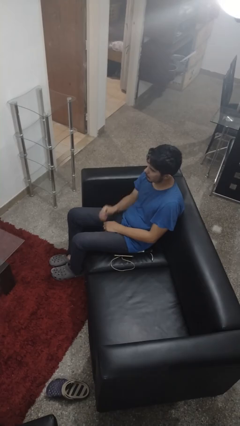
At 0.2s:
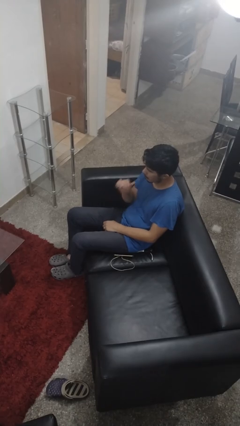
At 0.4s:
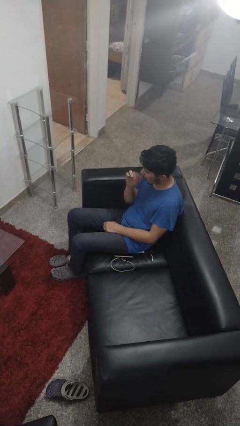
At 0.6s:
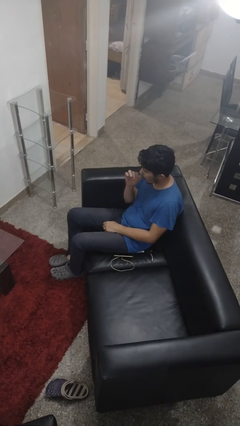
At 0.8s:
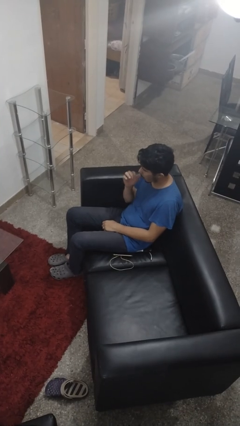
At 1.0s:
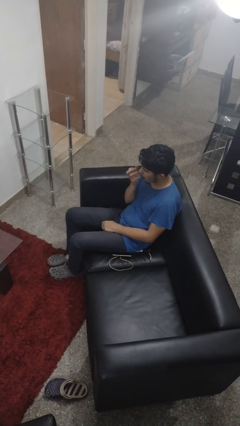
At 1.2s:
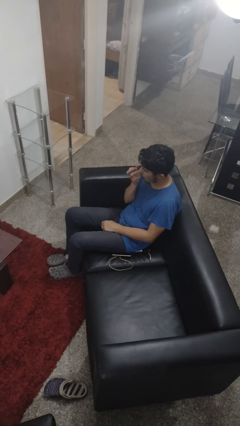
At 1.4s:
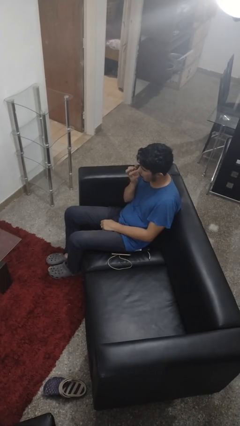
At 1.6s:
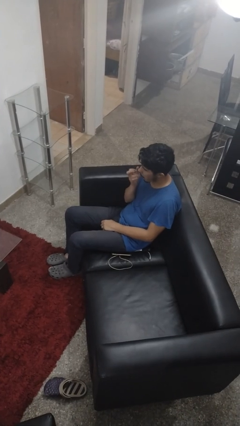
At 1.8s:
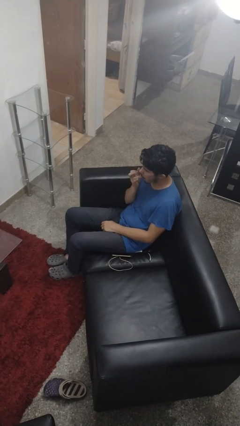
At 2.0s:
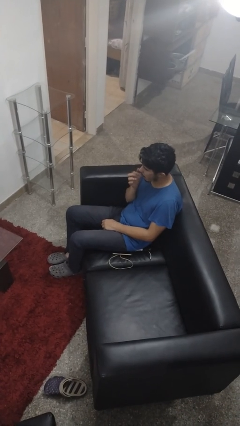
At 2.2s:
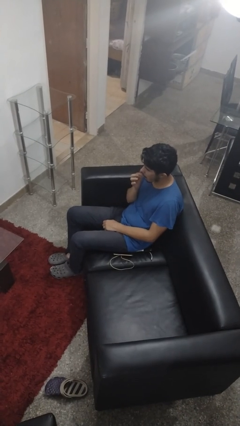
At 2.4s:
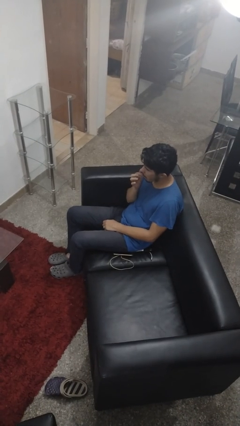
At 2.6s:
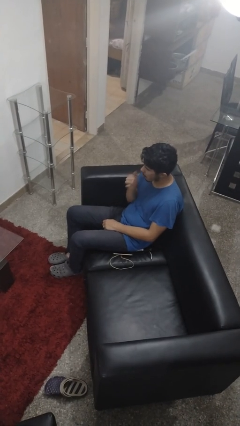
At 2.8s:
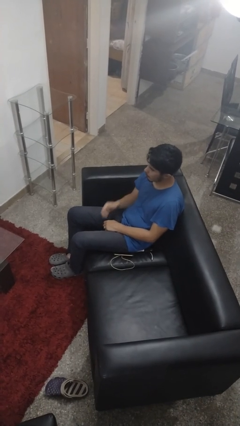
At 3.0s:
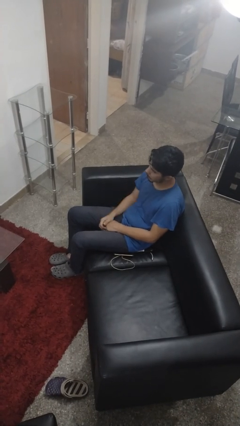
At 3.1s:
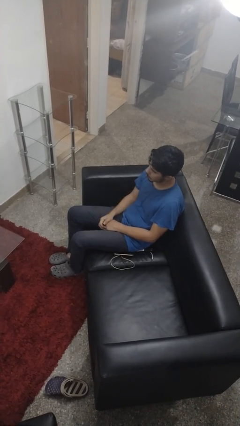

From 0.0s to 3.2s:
person licks fingers

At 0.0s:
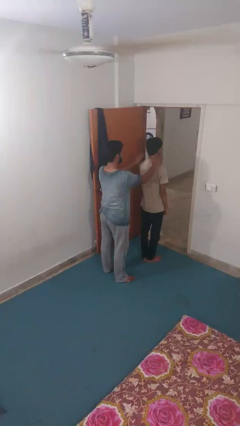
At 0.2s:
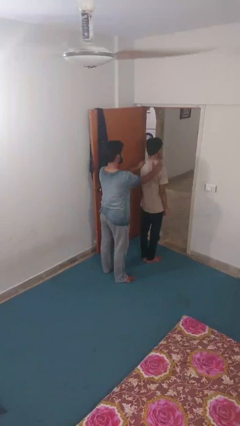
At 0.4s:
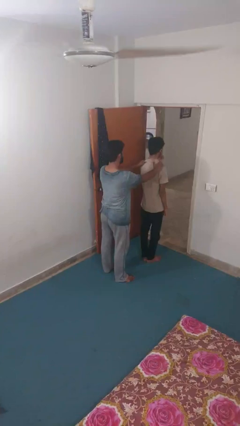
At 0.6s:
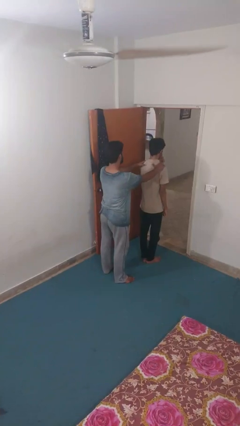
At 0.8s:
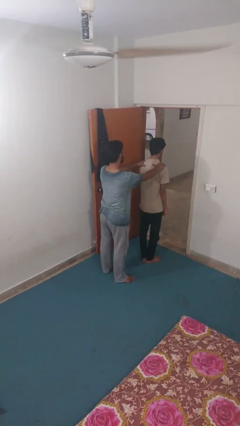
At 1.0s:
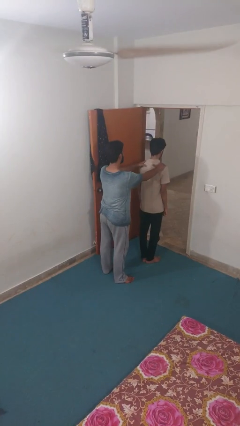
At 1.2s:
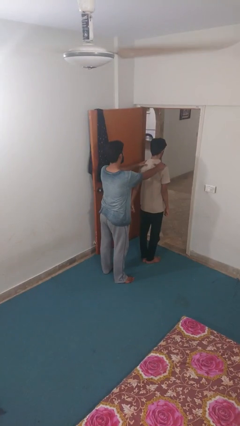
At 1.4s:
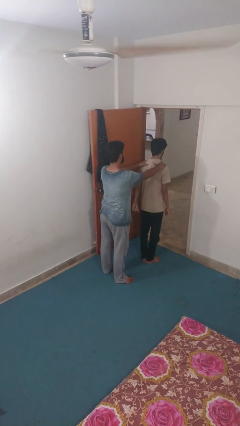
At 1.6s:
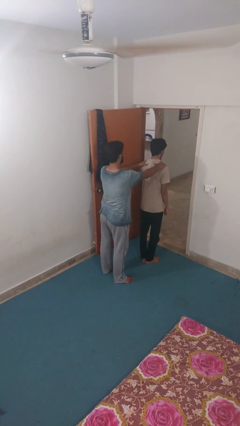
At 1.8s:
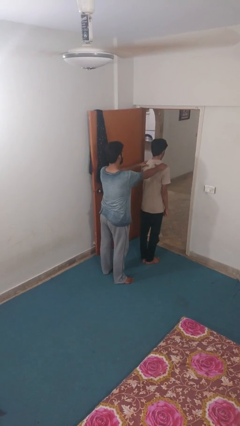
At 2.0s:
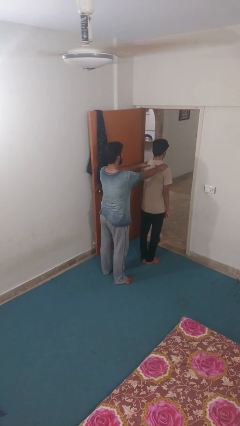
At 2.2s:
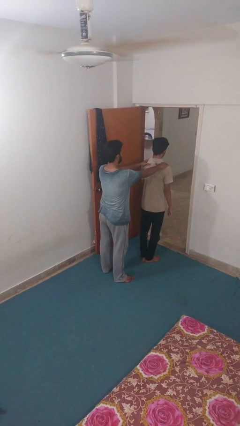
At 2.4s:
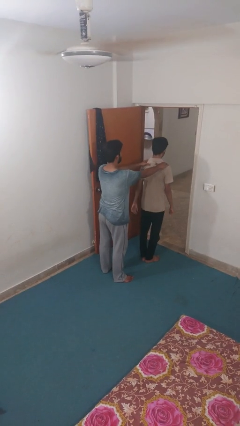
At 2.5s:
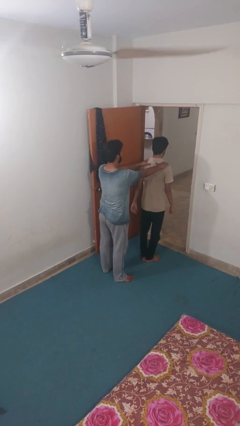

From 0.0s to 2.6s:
person grabs person by shoulder

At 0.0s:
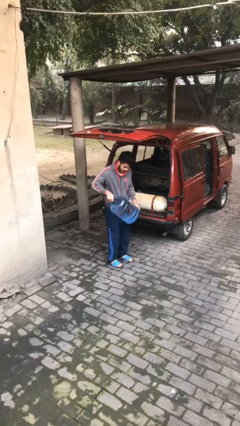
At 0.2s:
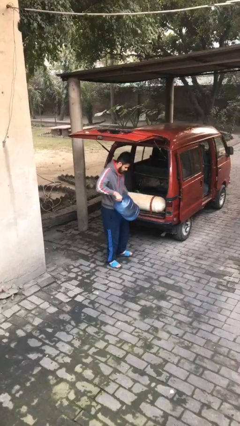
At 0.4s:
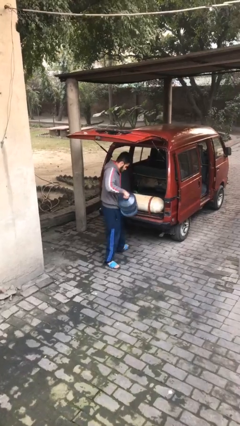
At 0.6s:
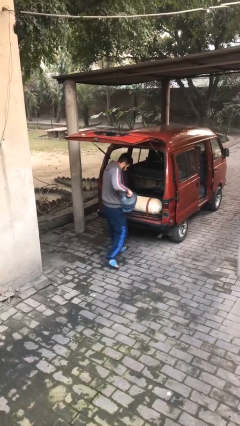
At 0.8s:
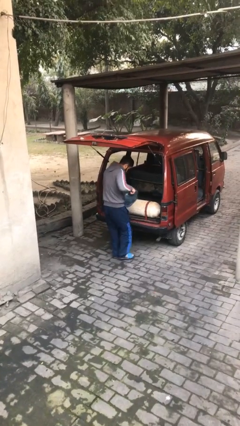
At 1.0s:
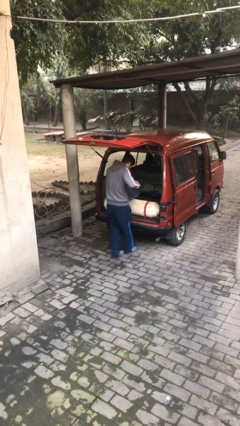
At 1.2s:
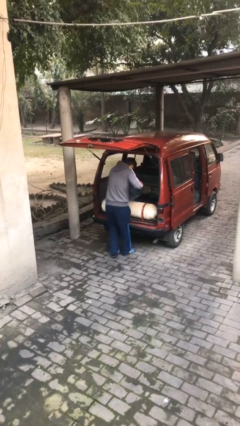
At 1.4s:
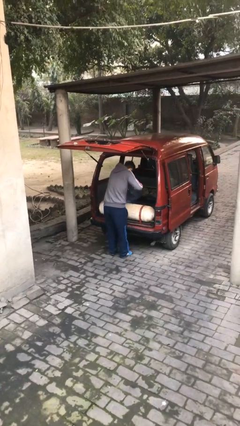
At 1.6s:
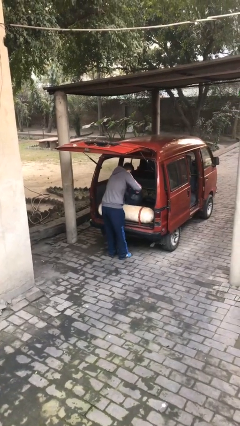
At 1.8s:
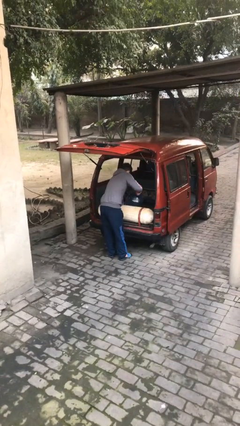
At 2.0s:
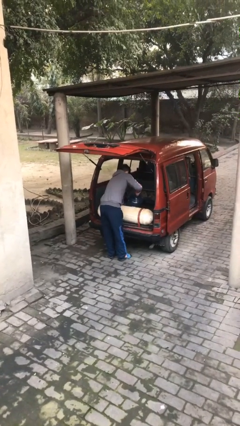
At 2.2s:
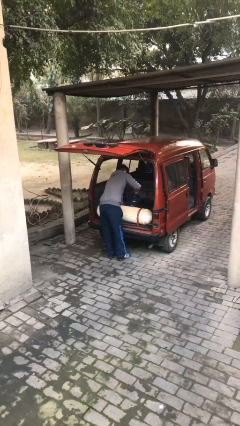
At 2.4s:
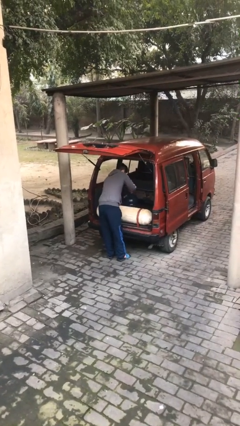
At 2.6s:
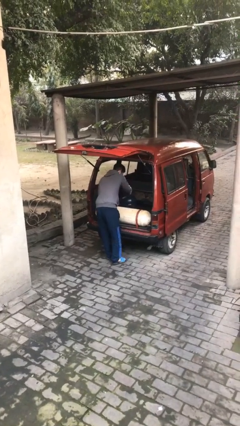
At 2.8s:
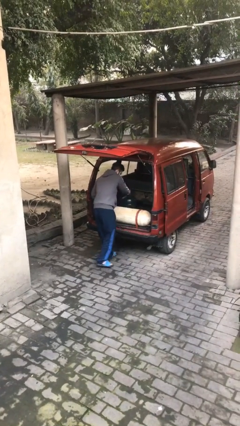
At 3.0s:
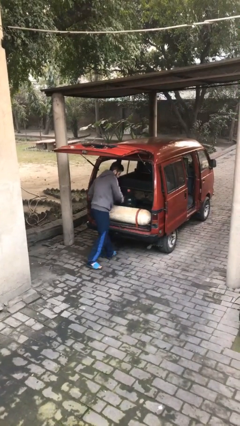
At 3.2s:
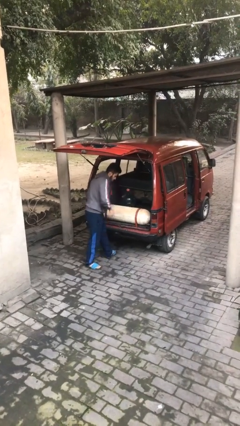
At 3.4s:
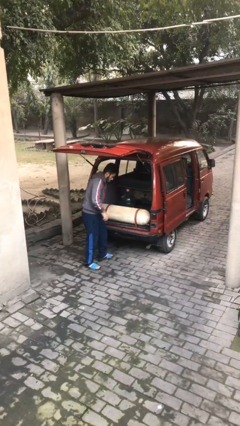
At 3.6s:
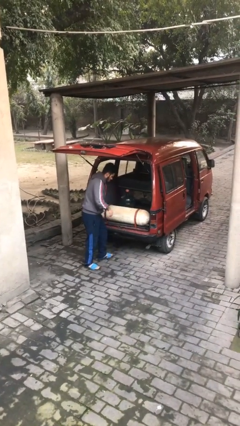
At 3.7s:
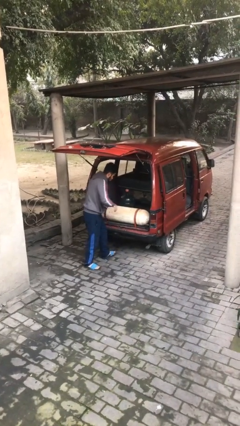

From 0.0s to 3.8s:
person loads car

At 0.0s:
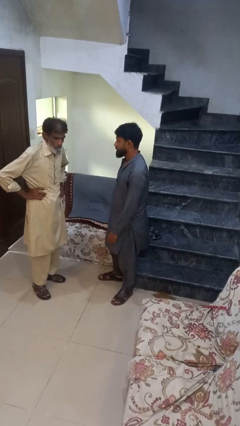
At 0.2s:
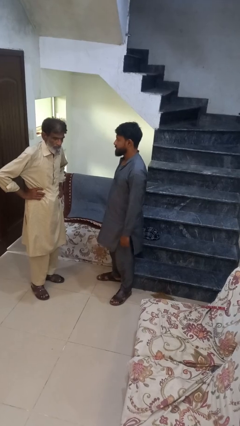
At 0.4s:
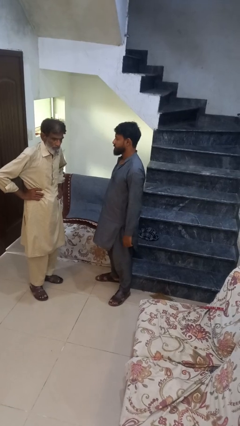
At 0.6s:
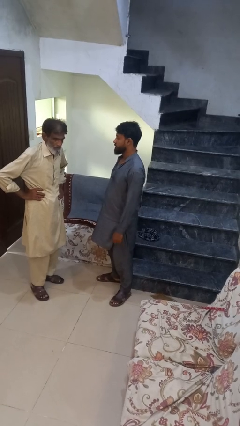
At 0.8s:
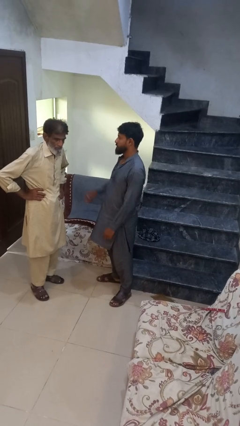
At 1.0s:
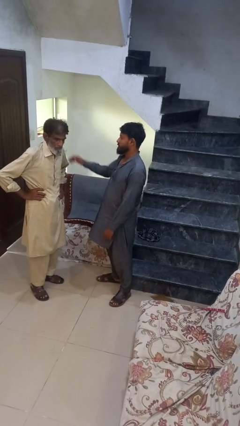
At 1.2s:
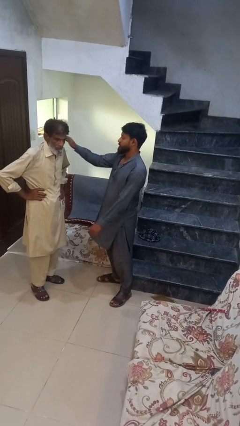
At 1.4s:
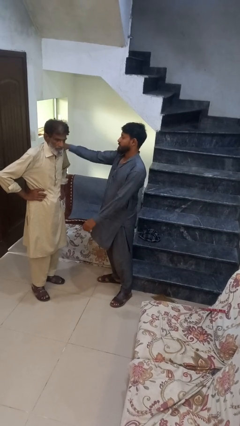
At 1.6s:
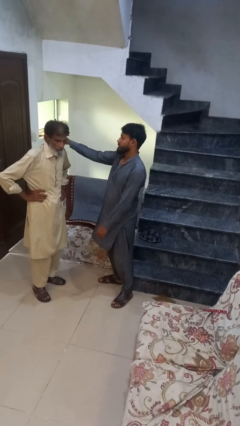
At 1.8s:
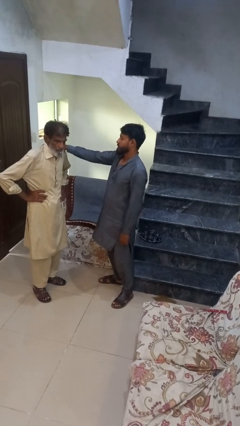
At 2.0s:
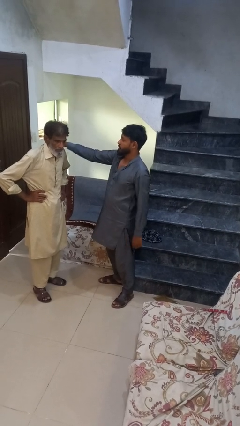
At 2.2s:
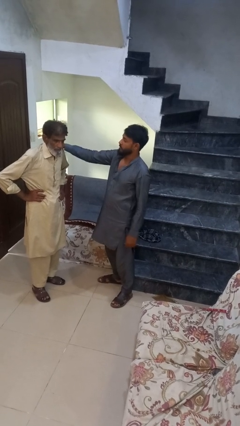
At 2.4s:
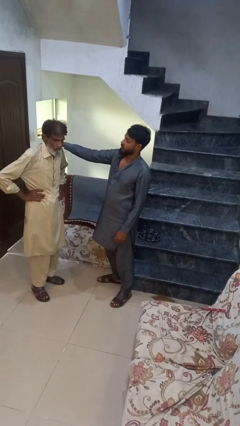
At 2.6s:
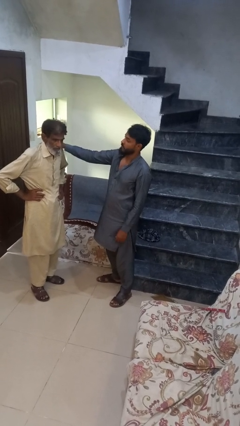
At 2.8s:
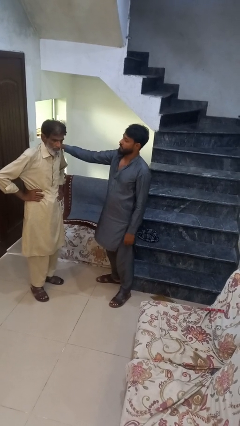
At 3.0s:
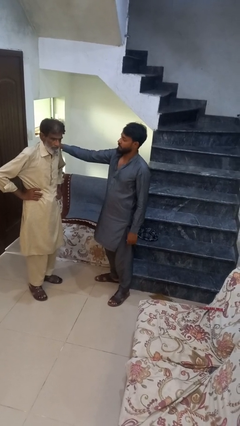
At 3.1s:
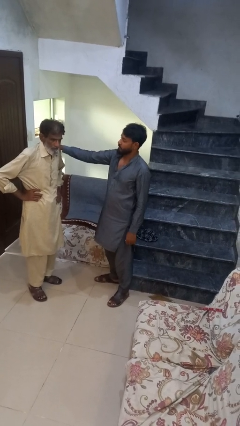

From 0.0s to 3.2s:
person pounds shoulders of person

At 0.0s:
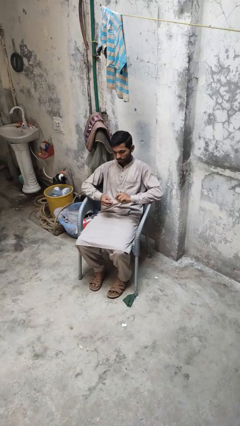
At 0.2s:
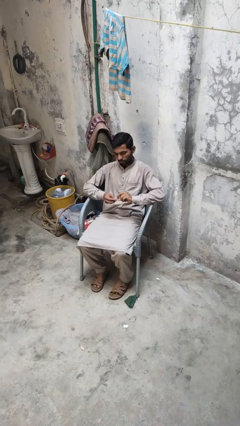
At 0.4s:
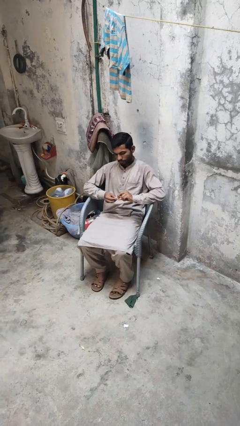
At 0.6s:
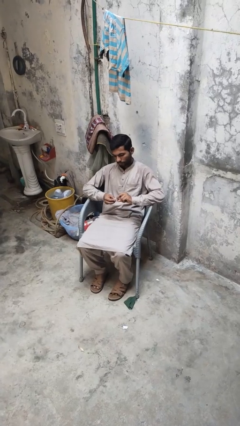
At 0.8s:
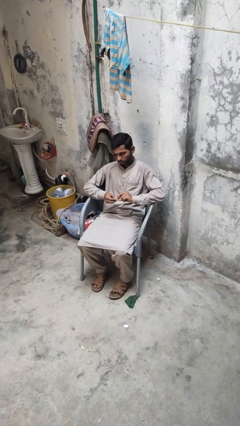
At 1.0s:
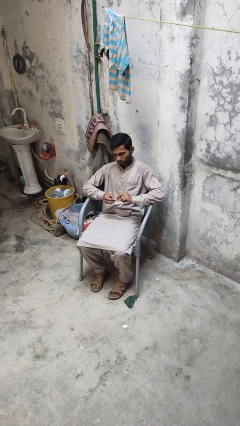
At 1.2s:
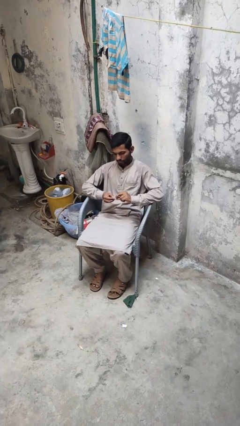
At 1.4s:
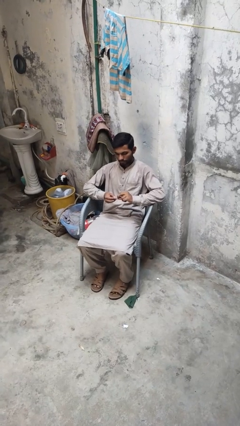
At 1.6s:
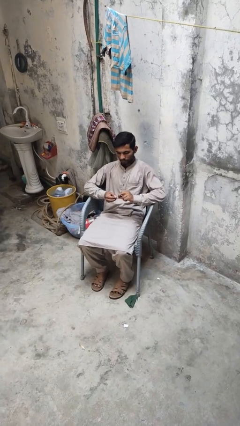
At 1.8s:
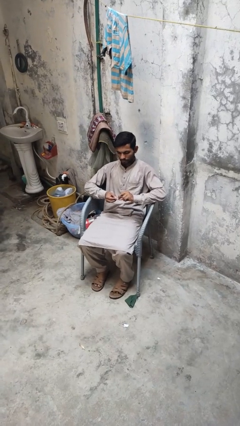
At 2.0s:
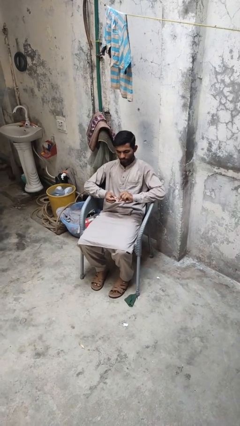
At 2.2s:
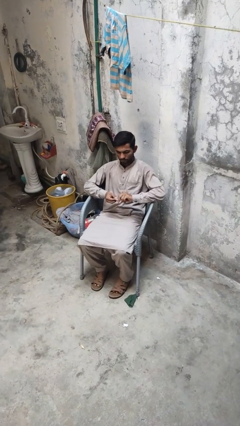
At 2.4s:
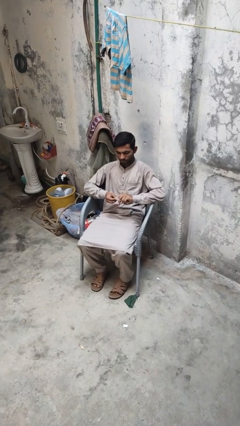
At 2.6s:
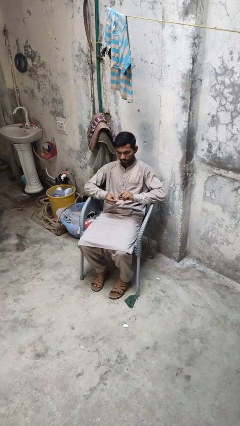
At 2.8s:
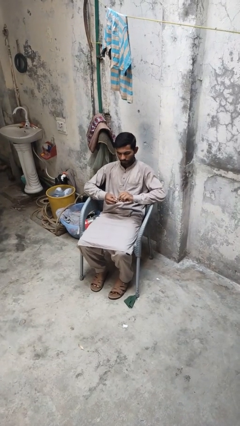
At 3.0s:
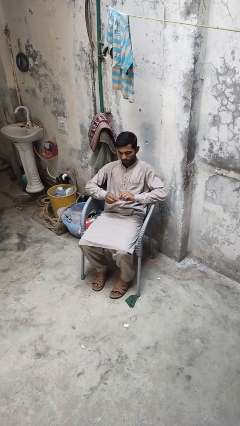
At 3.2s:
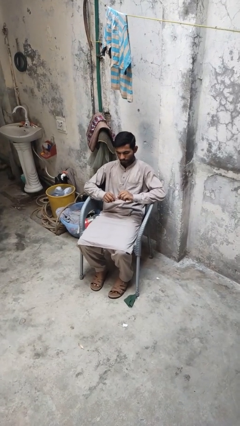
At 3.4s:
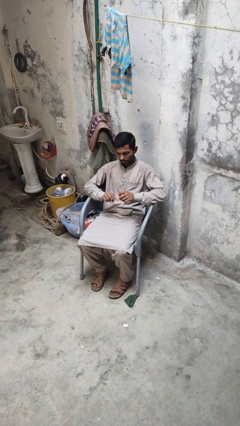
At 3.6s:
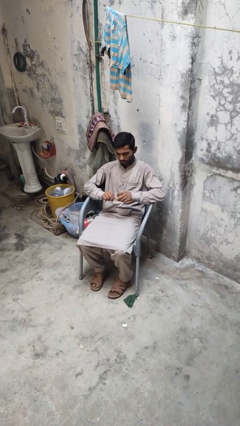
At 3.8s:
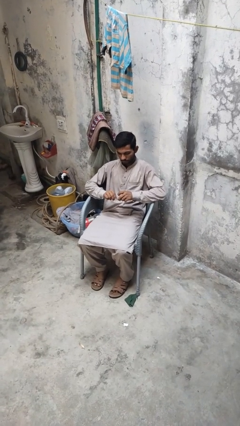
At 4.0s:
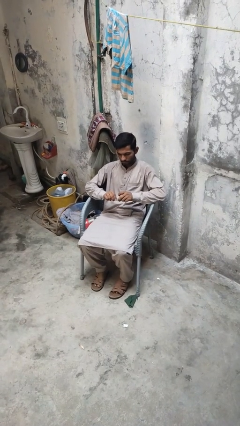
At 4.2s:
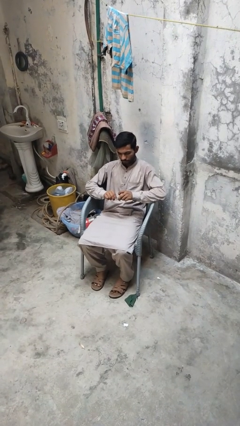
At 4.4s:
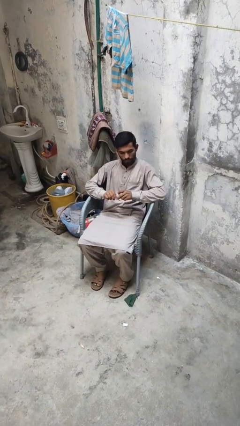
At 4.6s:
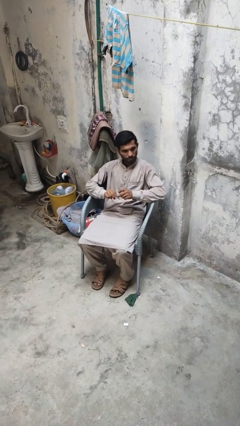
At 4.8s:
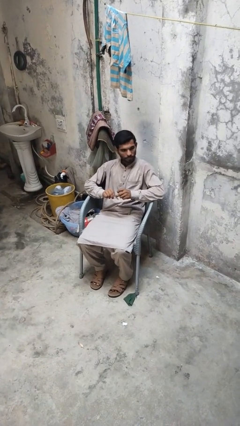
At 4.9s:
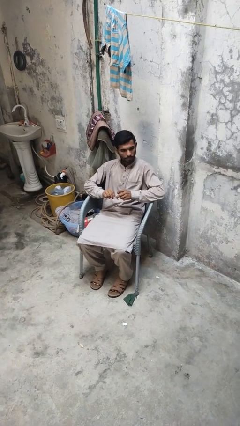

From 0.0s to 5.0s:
person files fingernails
